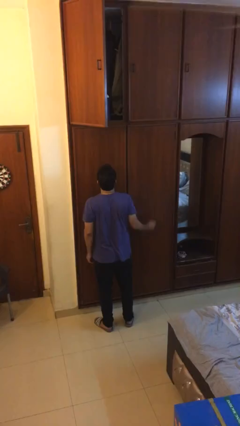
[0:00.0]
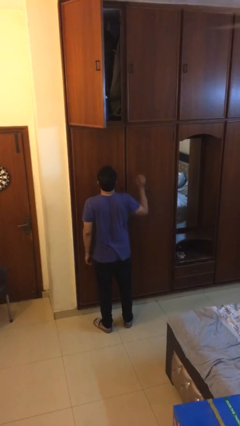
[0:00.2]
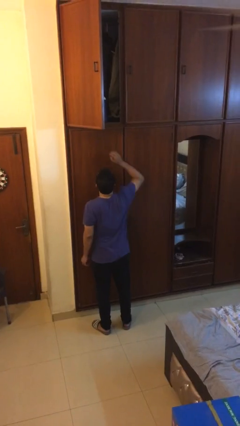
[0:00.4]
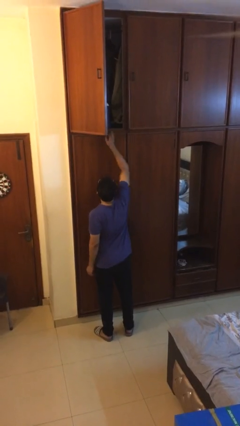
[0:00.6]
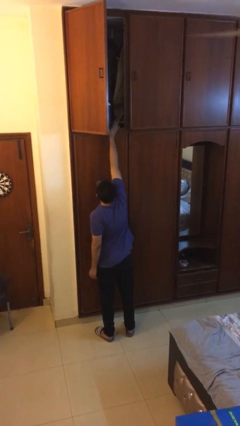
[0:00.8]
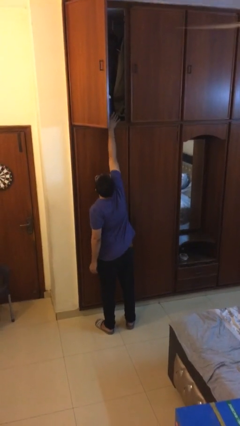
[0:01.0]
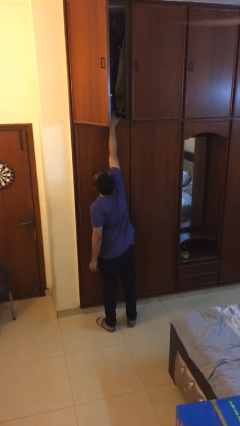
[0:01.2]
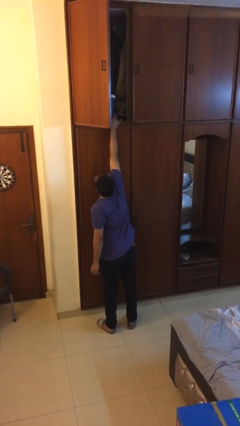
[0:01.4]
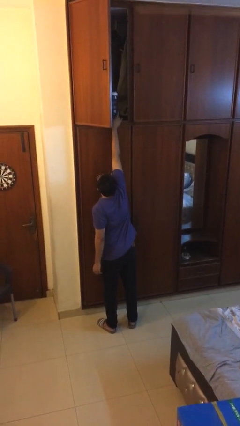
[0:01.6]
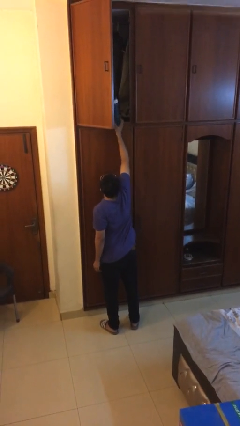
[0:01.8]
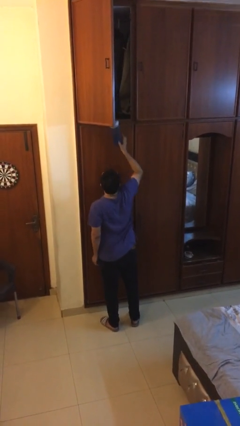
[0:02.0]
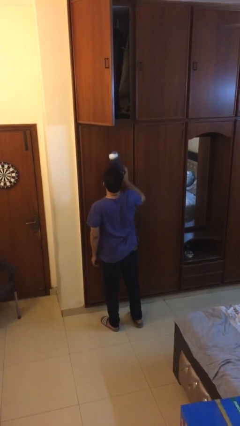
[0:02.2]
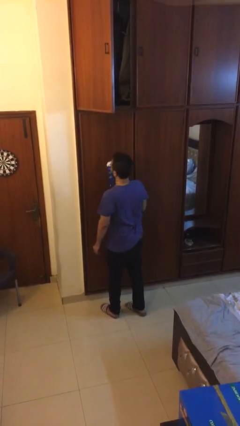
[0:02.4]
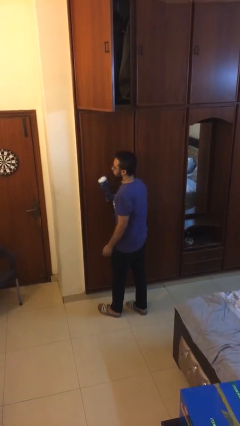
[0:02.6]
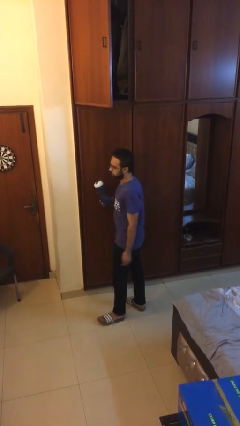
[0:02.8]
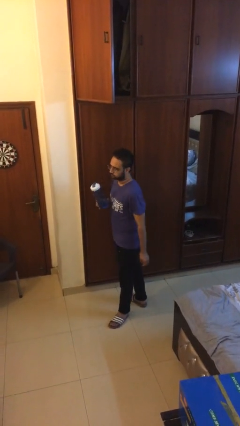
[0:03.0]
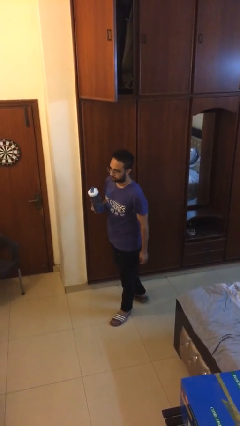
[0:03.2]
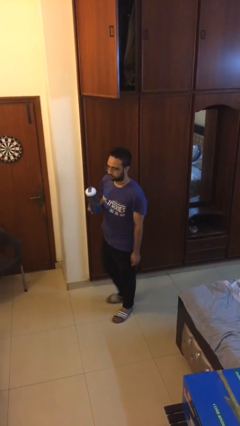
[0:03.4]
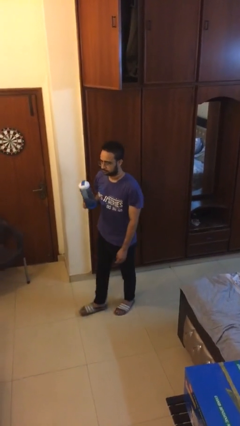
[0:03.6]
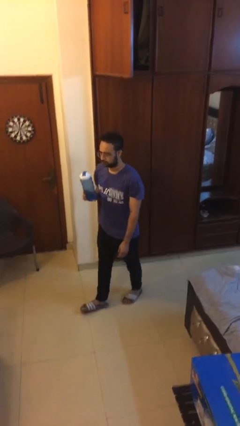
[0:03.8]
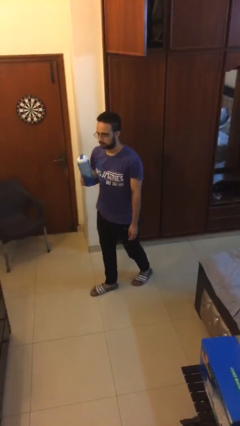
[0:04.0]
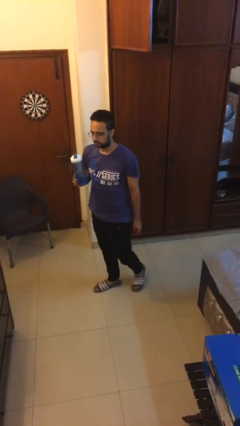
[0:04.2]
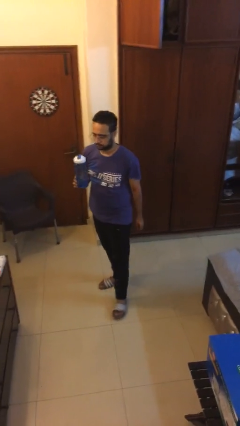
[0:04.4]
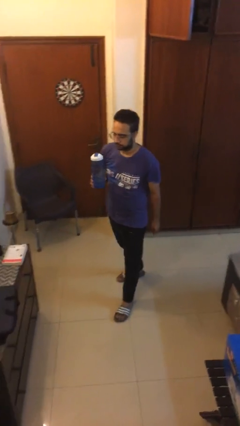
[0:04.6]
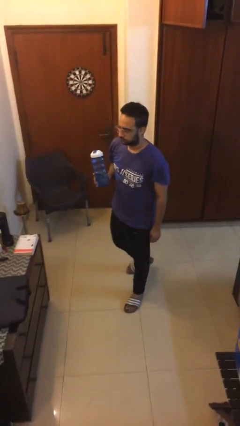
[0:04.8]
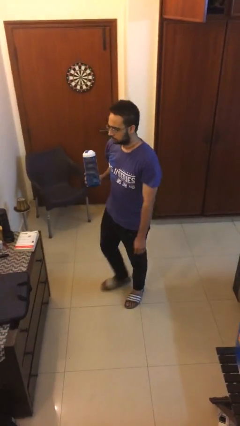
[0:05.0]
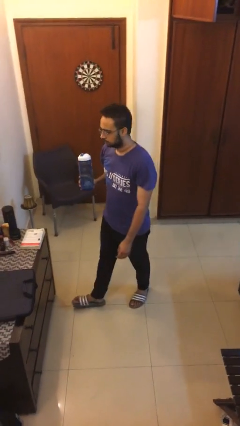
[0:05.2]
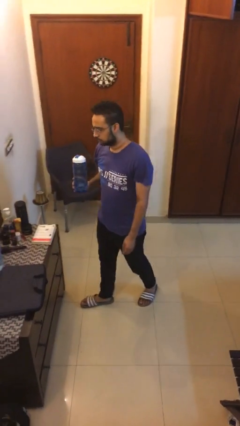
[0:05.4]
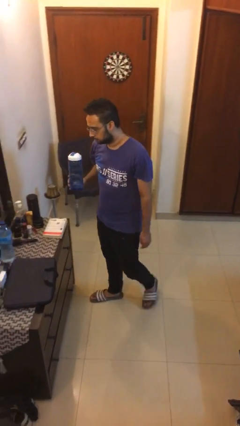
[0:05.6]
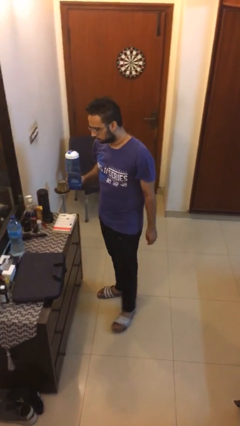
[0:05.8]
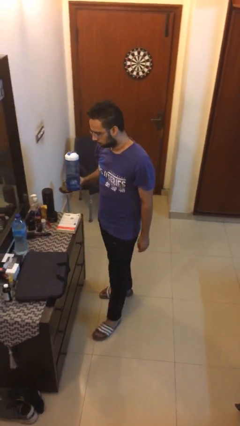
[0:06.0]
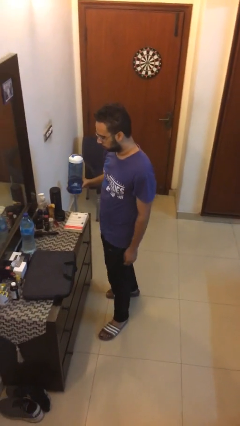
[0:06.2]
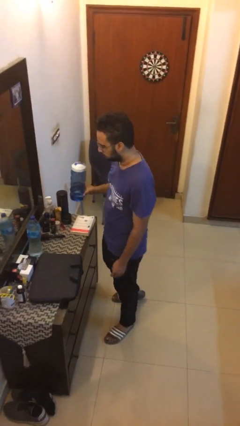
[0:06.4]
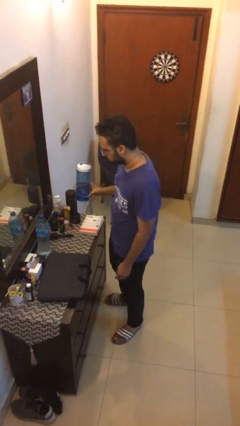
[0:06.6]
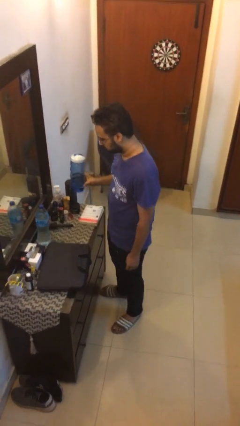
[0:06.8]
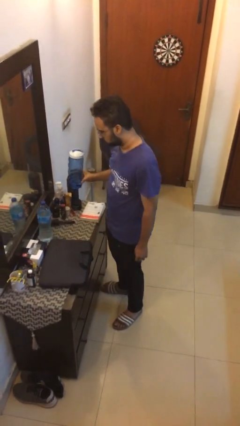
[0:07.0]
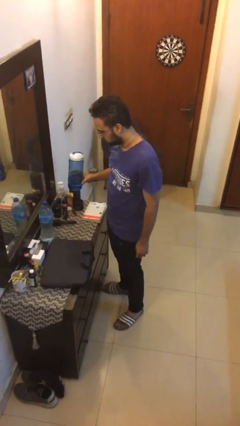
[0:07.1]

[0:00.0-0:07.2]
person picks up object from shelf

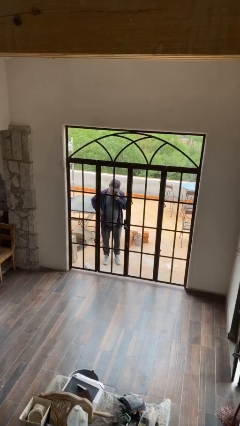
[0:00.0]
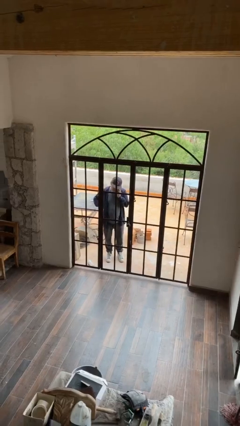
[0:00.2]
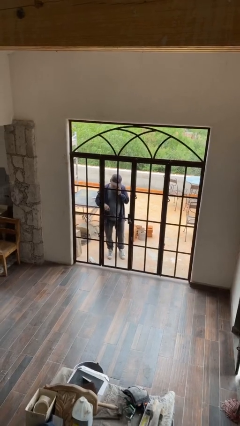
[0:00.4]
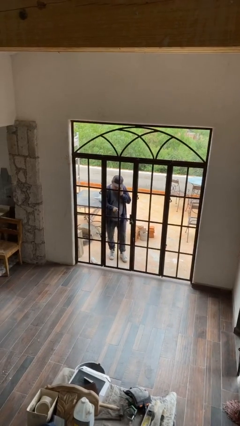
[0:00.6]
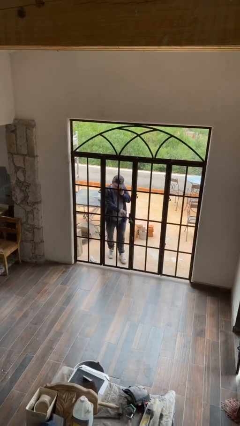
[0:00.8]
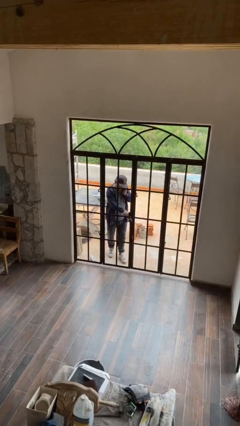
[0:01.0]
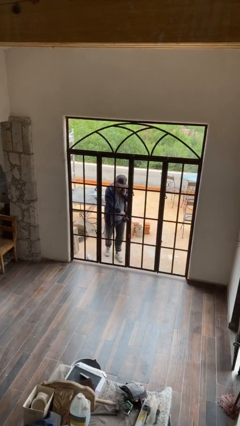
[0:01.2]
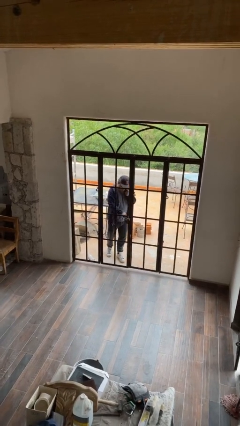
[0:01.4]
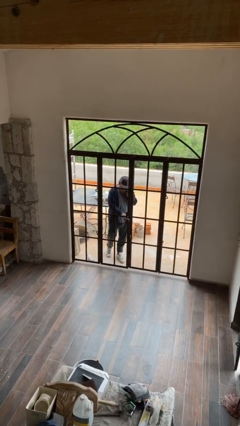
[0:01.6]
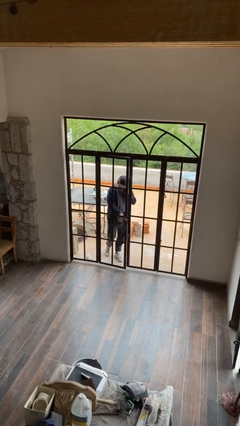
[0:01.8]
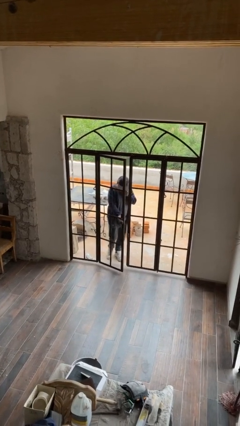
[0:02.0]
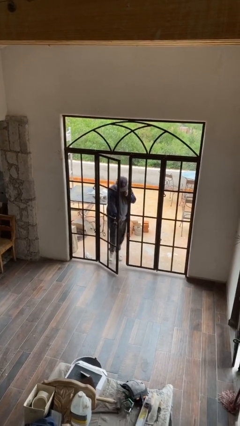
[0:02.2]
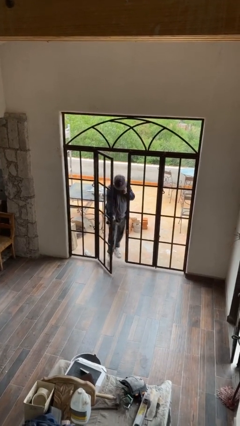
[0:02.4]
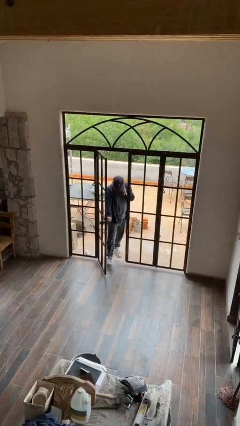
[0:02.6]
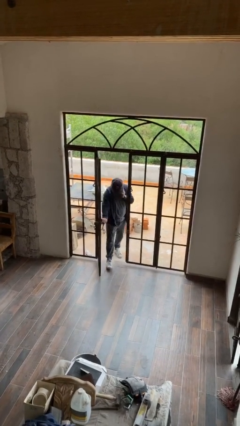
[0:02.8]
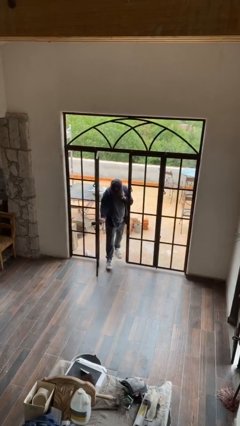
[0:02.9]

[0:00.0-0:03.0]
person opens facility door

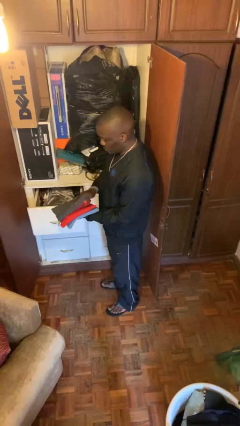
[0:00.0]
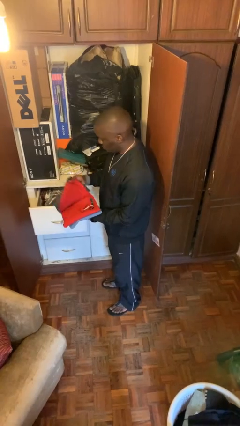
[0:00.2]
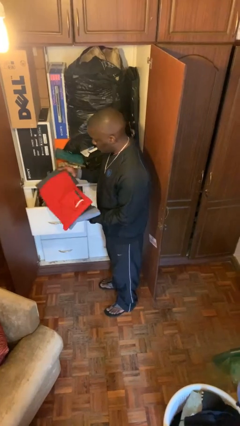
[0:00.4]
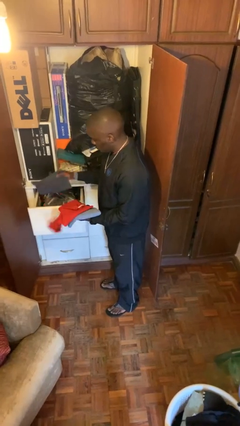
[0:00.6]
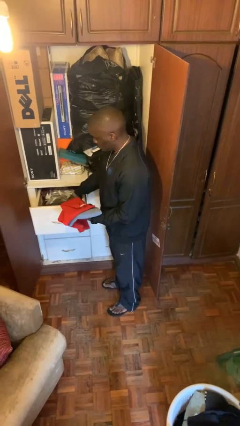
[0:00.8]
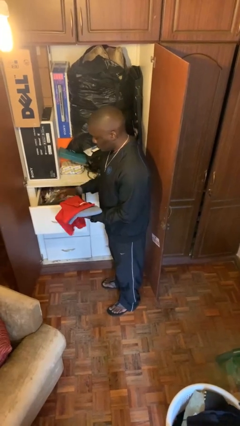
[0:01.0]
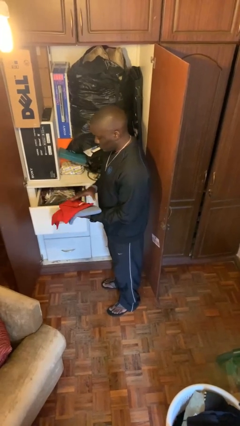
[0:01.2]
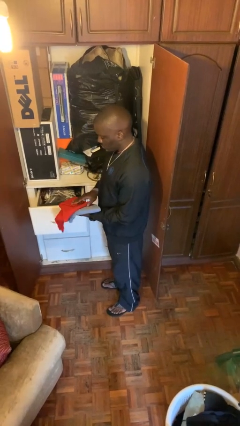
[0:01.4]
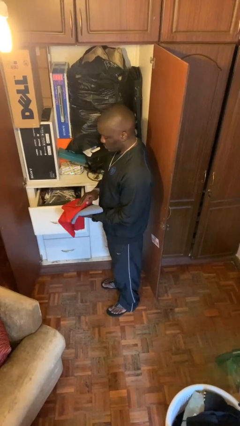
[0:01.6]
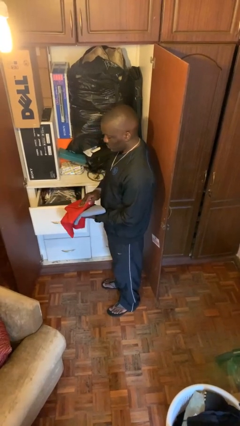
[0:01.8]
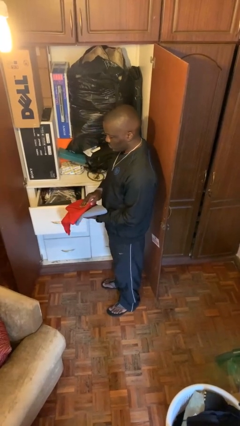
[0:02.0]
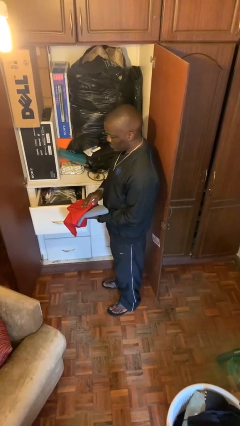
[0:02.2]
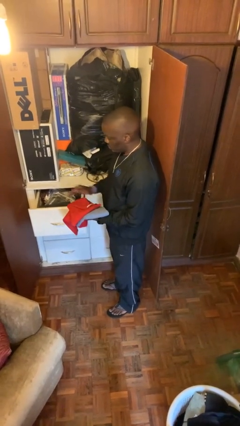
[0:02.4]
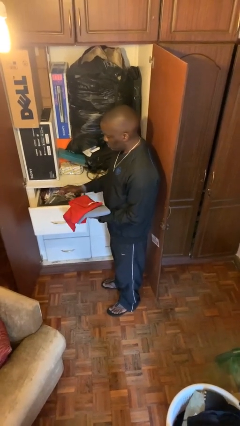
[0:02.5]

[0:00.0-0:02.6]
person puts clothes into dresser

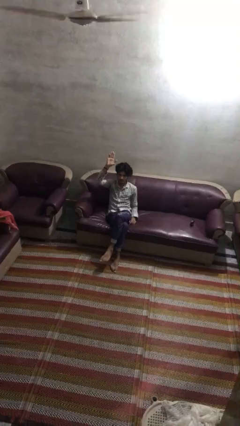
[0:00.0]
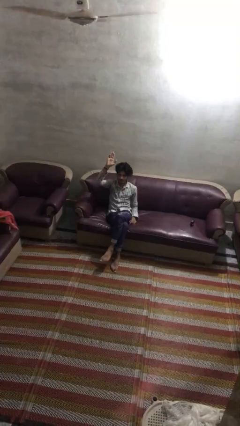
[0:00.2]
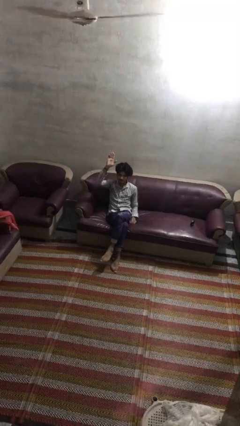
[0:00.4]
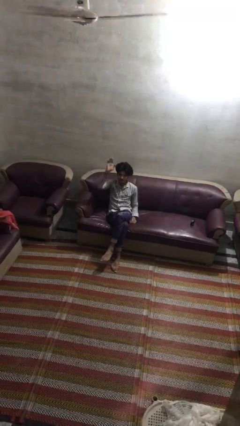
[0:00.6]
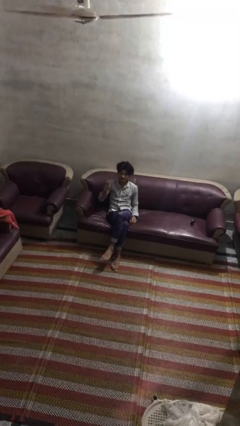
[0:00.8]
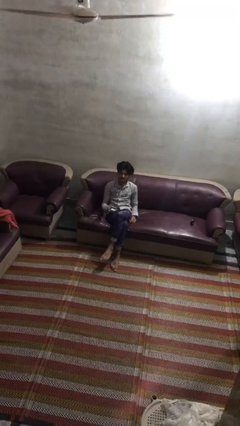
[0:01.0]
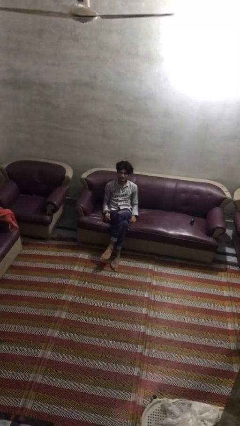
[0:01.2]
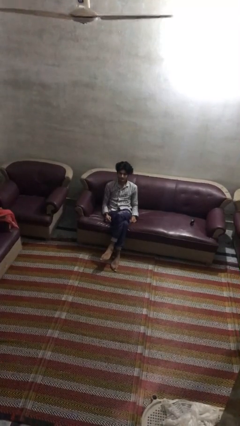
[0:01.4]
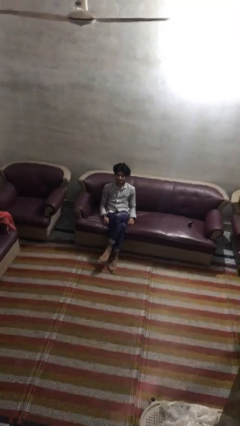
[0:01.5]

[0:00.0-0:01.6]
person gestures lower hand

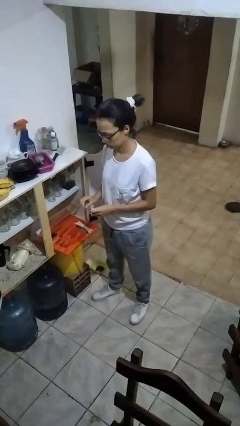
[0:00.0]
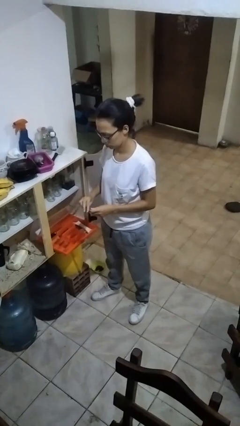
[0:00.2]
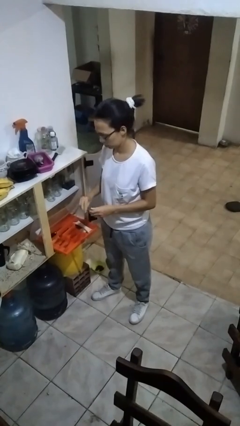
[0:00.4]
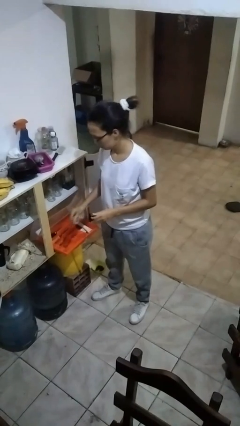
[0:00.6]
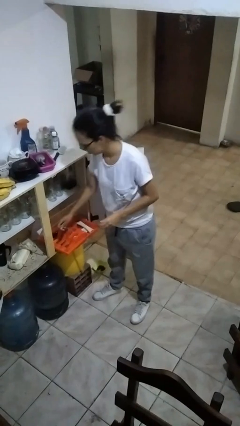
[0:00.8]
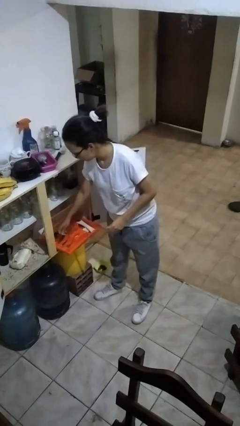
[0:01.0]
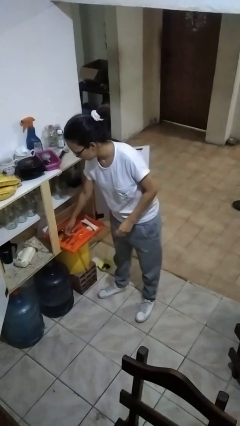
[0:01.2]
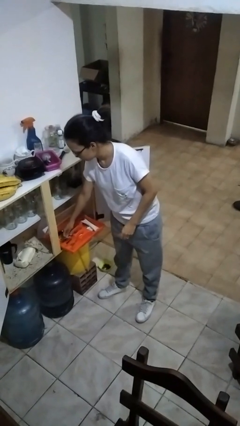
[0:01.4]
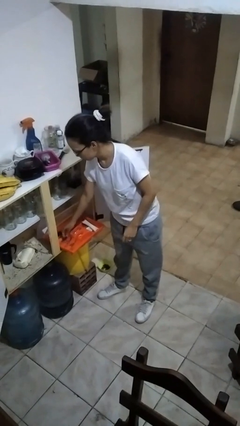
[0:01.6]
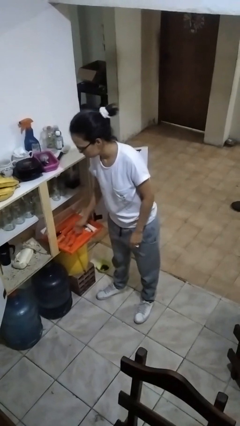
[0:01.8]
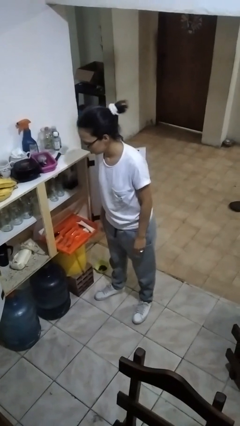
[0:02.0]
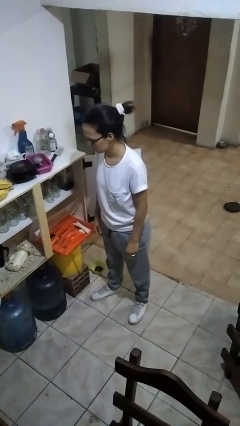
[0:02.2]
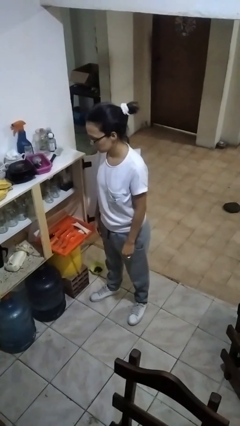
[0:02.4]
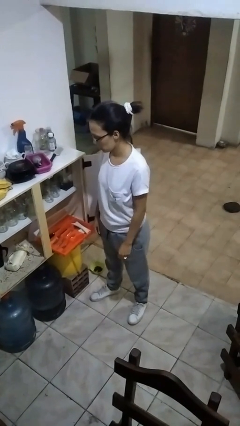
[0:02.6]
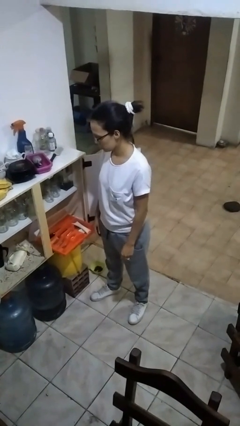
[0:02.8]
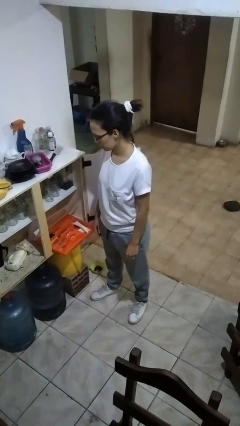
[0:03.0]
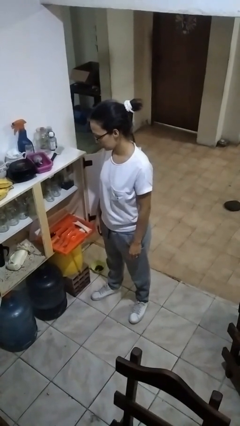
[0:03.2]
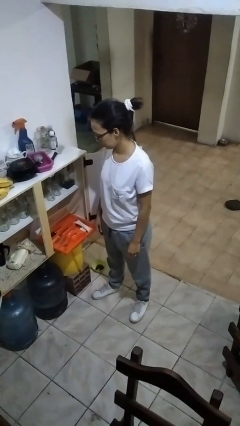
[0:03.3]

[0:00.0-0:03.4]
person puts object into kitchen drawer
